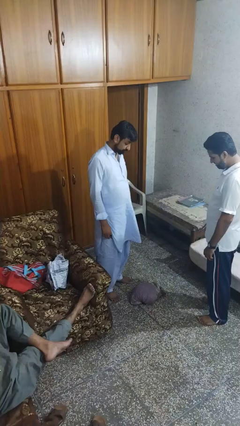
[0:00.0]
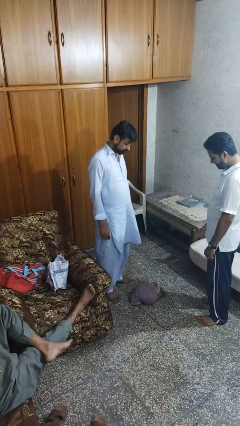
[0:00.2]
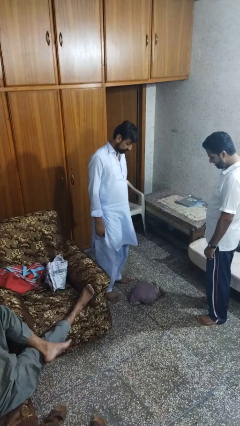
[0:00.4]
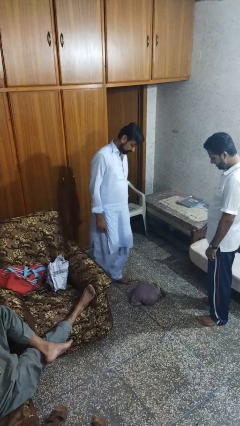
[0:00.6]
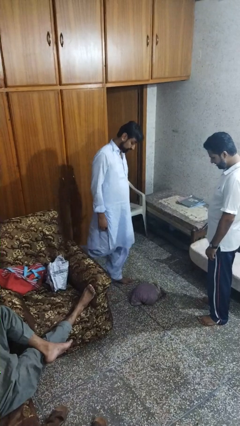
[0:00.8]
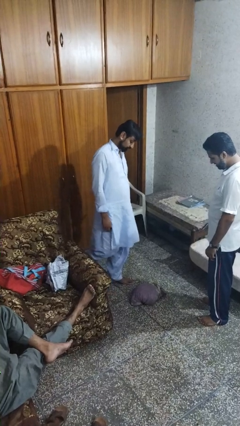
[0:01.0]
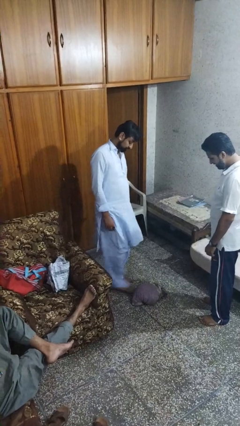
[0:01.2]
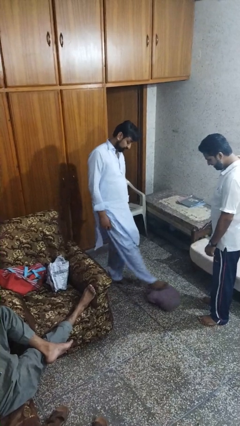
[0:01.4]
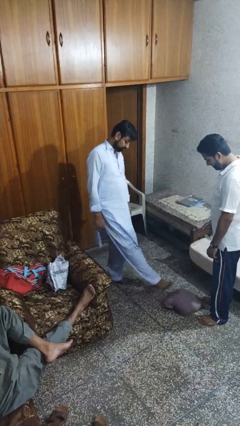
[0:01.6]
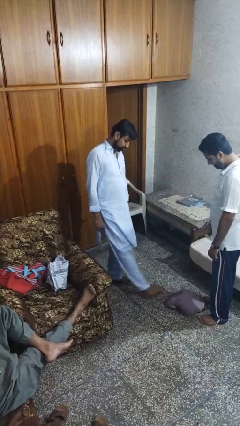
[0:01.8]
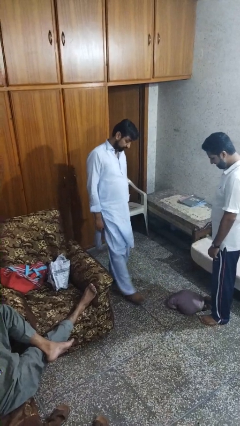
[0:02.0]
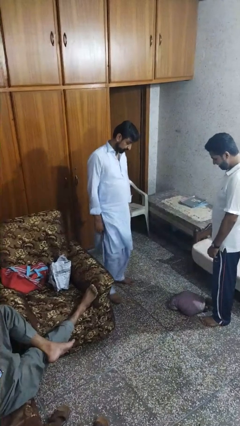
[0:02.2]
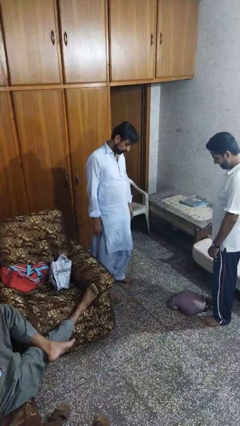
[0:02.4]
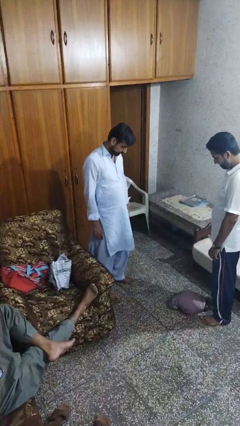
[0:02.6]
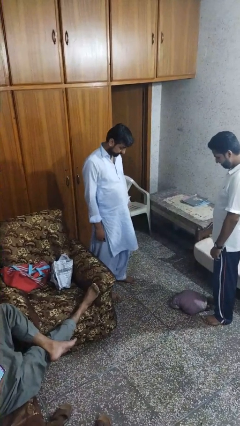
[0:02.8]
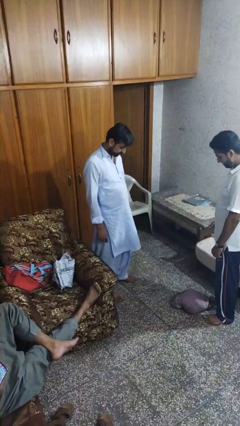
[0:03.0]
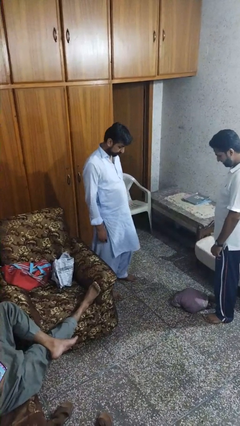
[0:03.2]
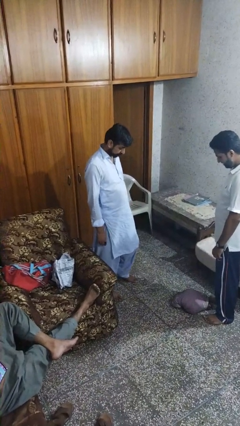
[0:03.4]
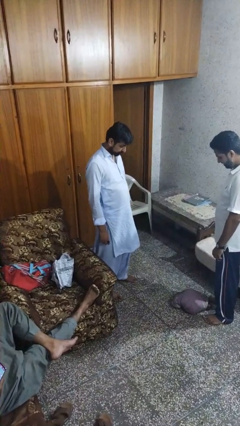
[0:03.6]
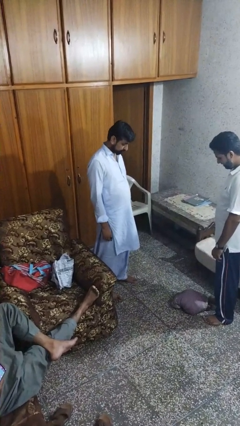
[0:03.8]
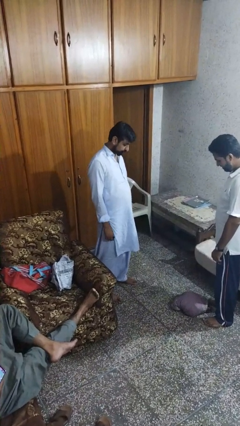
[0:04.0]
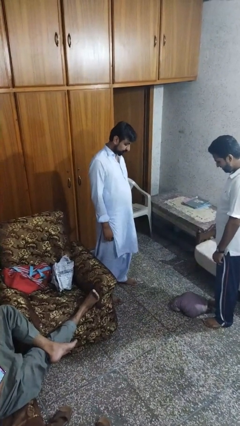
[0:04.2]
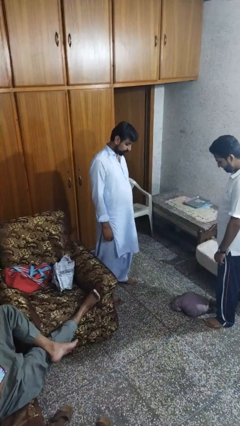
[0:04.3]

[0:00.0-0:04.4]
person kicks object to person

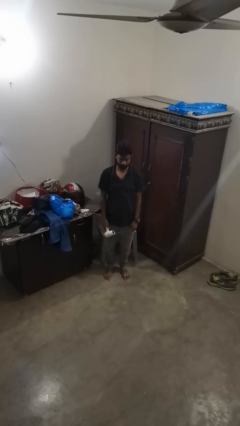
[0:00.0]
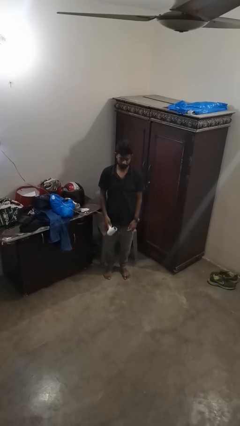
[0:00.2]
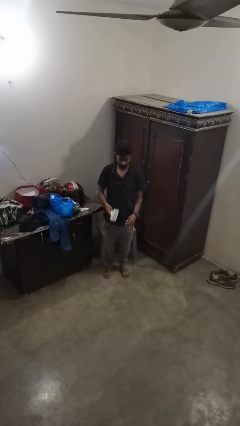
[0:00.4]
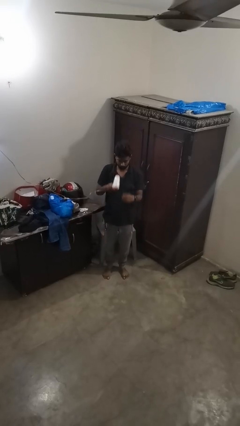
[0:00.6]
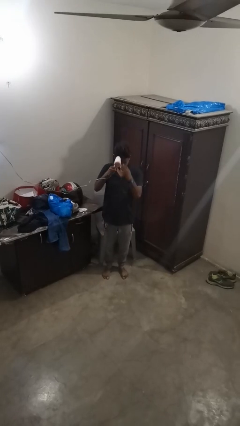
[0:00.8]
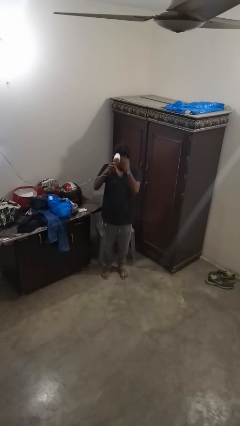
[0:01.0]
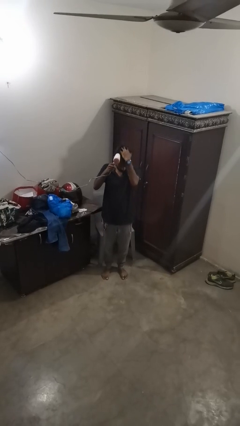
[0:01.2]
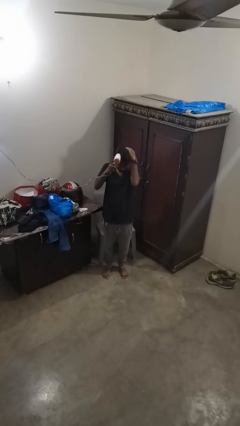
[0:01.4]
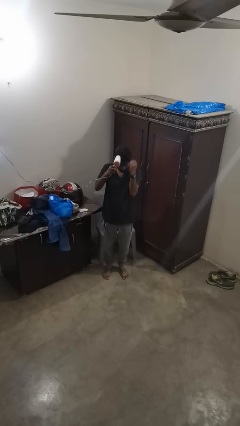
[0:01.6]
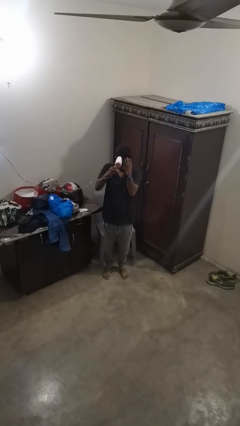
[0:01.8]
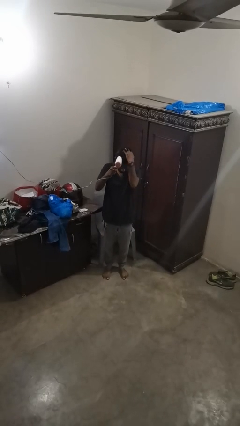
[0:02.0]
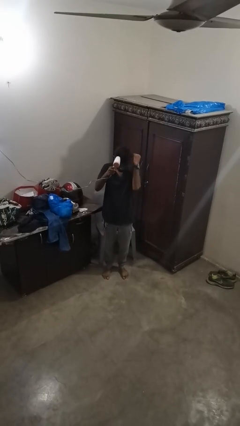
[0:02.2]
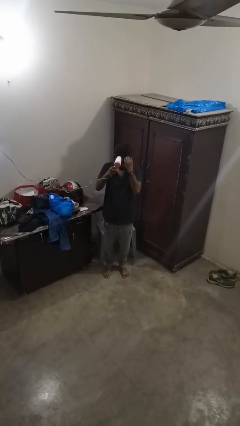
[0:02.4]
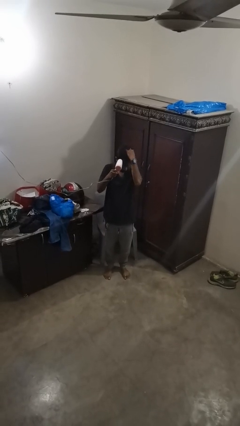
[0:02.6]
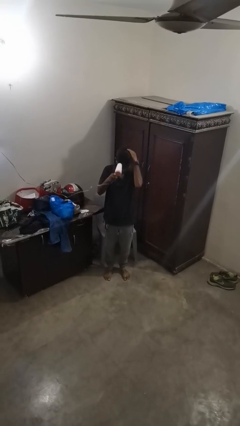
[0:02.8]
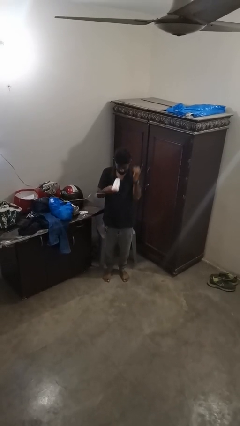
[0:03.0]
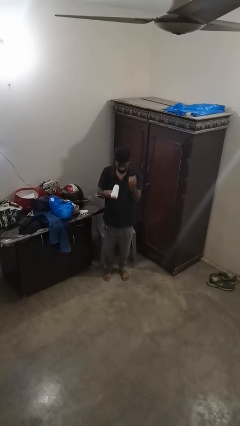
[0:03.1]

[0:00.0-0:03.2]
person dries hair with hairdryer

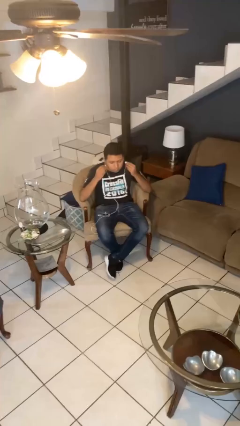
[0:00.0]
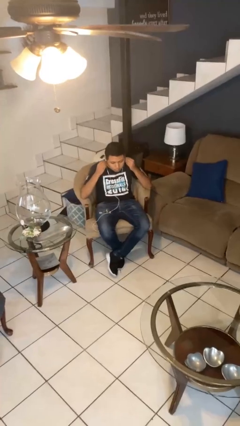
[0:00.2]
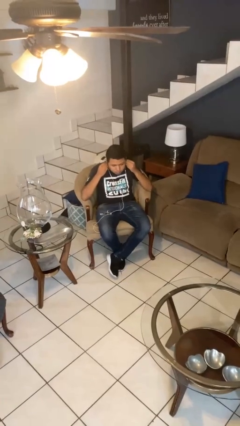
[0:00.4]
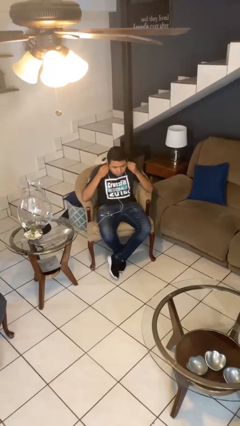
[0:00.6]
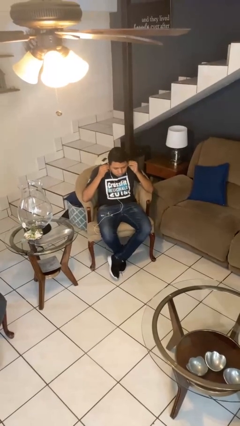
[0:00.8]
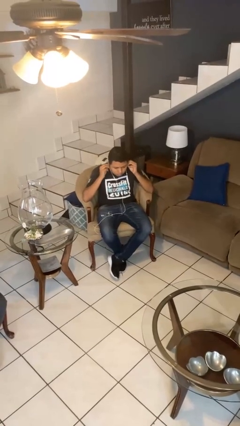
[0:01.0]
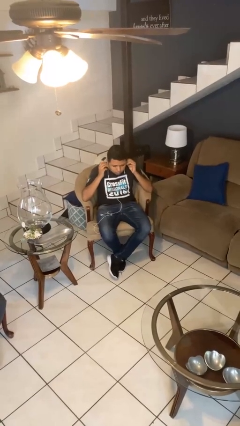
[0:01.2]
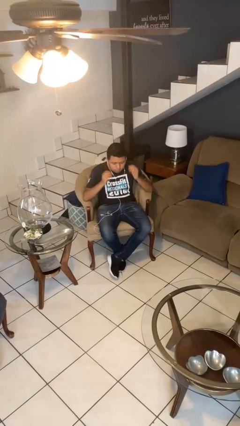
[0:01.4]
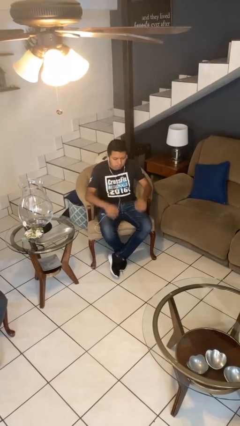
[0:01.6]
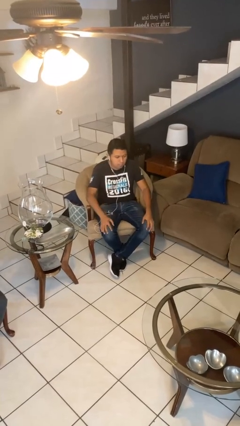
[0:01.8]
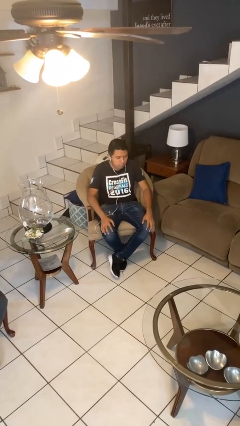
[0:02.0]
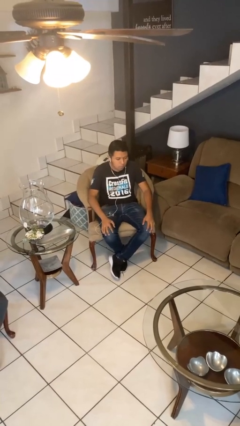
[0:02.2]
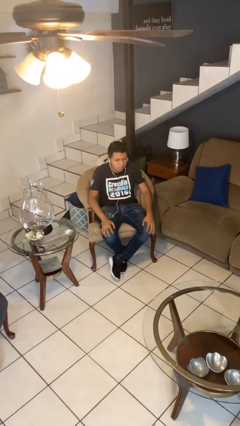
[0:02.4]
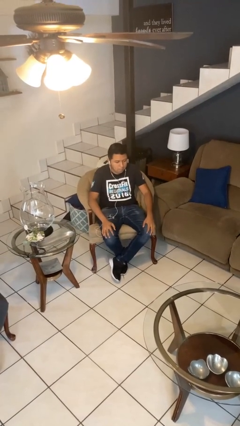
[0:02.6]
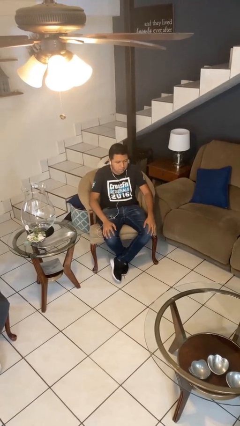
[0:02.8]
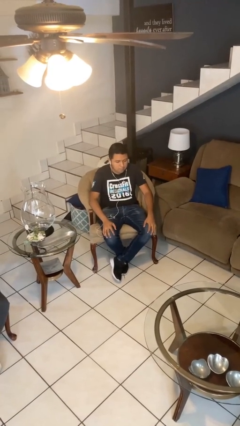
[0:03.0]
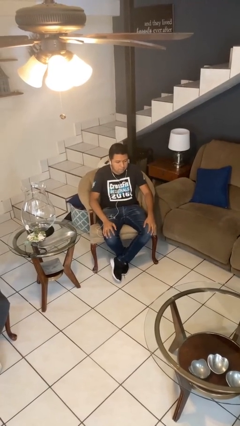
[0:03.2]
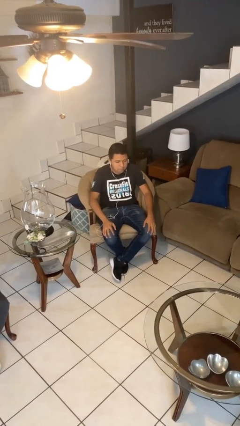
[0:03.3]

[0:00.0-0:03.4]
person puts on headphones

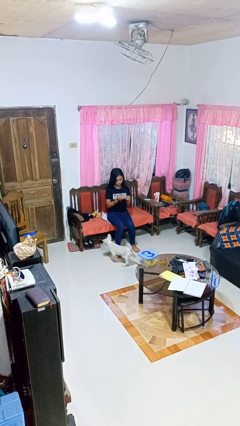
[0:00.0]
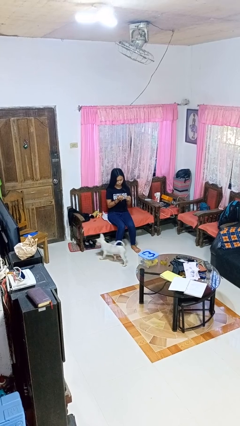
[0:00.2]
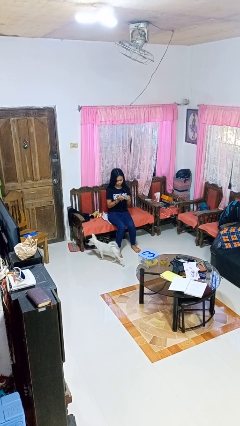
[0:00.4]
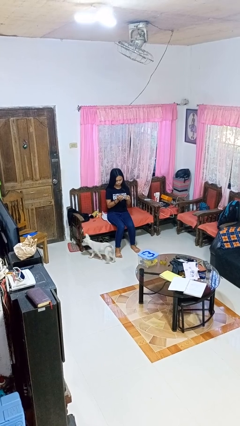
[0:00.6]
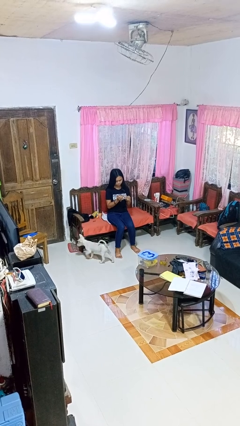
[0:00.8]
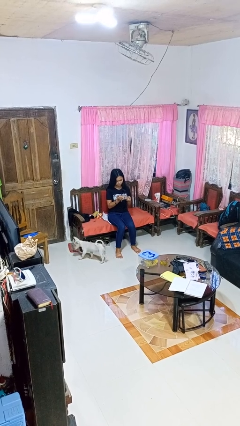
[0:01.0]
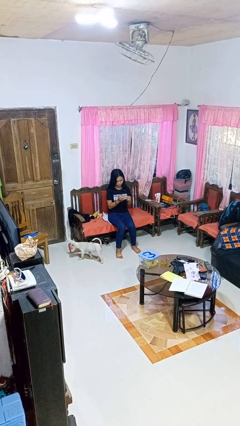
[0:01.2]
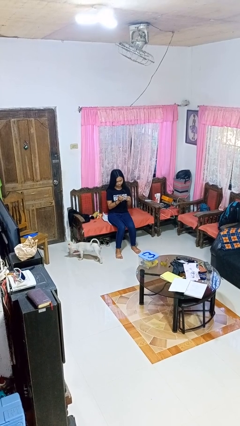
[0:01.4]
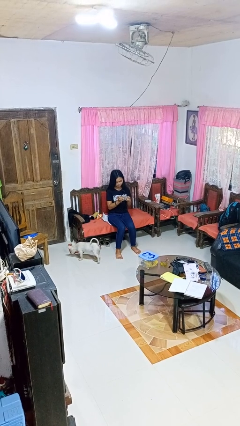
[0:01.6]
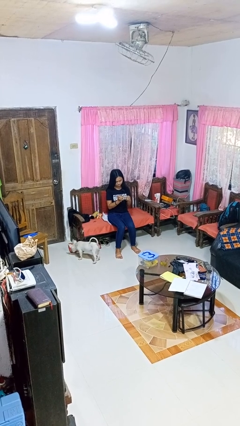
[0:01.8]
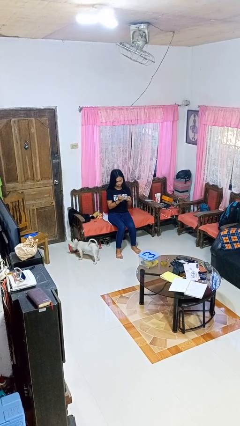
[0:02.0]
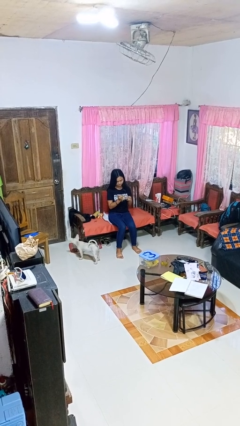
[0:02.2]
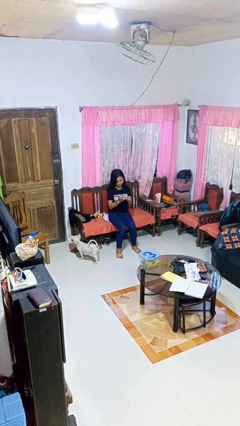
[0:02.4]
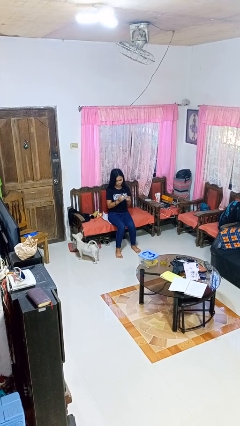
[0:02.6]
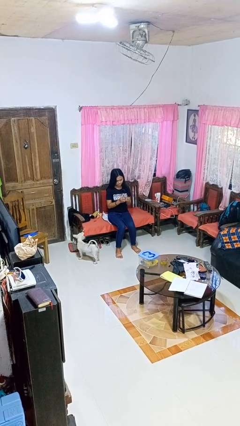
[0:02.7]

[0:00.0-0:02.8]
person files fingernails

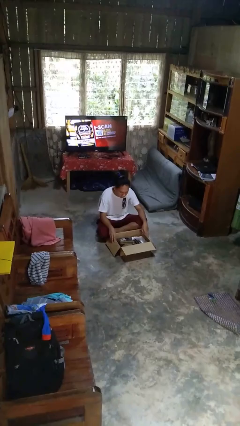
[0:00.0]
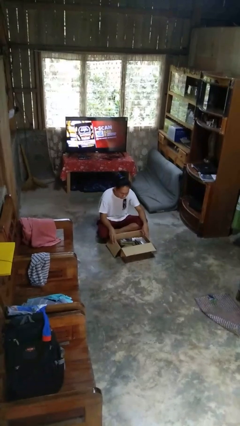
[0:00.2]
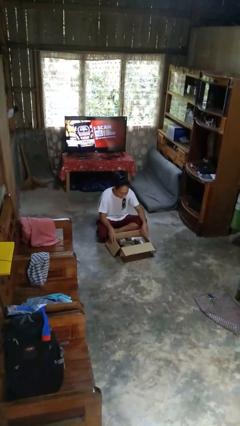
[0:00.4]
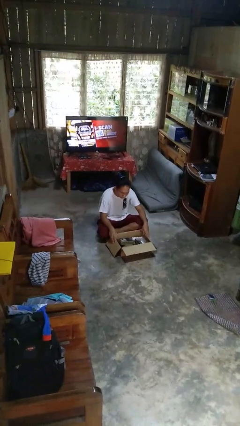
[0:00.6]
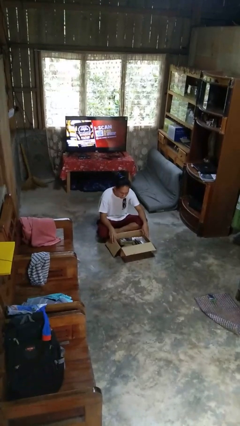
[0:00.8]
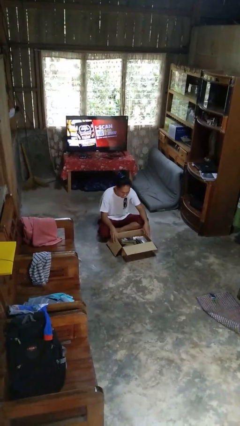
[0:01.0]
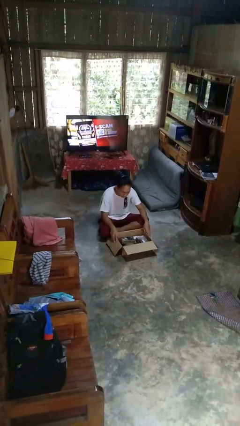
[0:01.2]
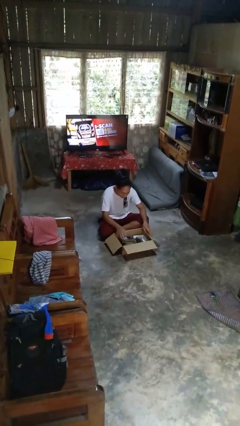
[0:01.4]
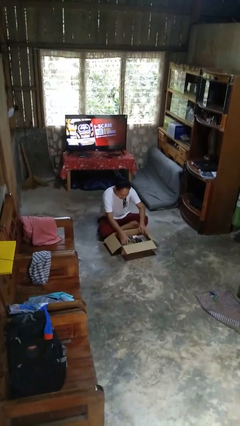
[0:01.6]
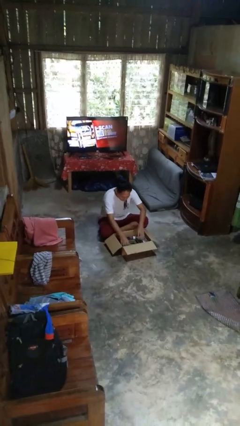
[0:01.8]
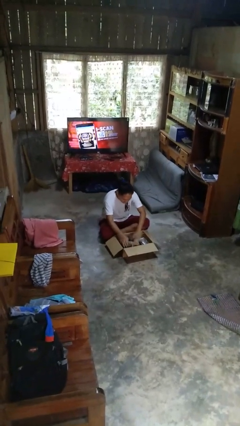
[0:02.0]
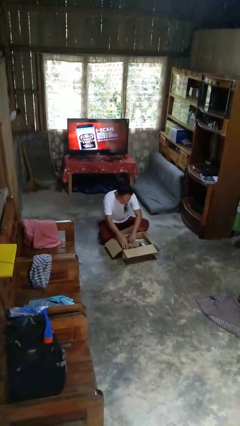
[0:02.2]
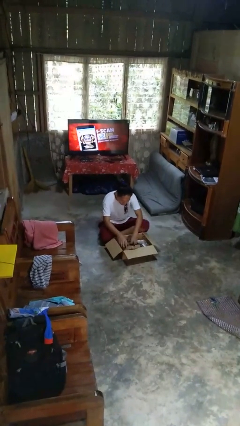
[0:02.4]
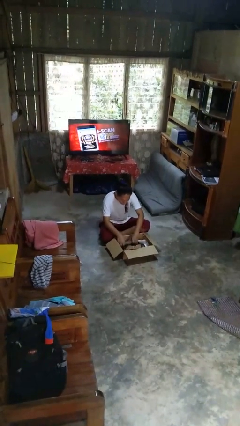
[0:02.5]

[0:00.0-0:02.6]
person searches in box

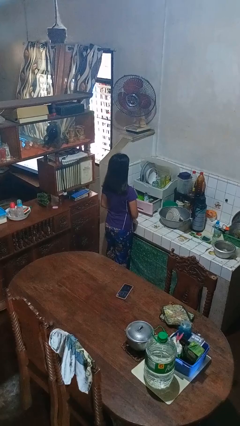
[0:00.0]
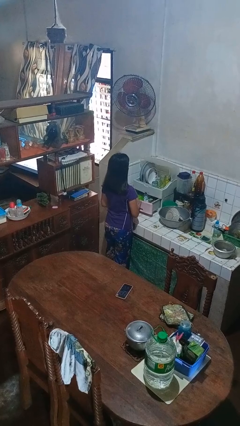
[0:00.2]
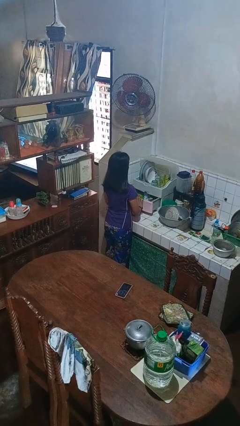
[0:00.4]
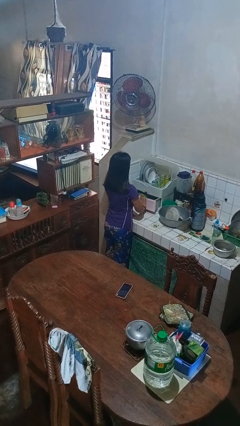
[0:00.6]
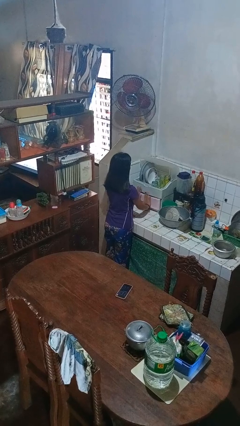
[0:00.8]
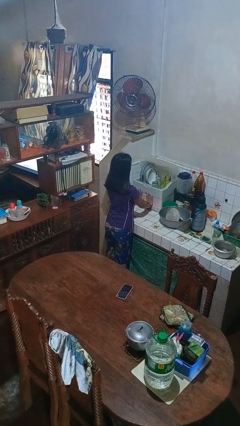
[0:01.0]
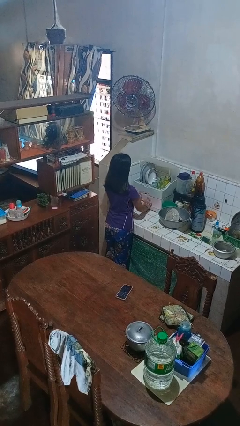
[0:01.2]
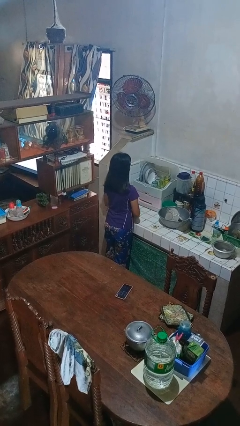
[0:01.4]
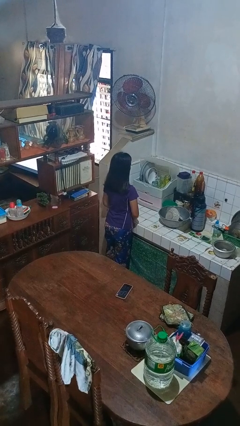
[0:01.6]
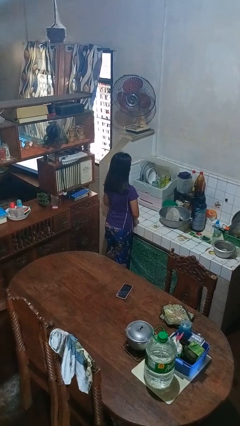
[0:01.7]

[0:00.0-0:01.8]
person closes kitchen drawer
